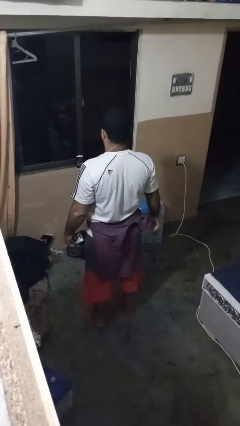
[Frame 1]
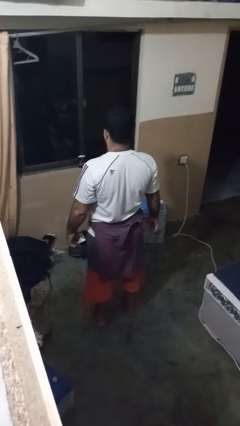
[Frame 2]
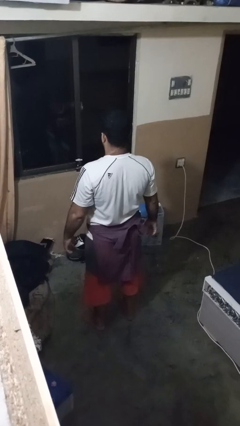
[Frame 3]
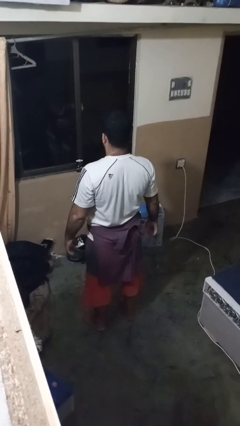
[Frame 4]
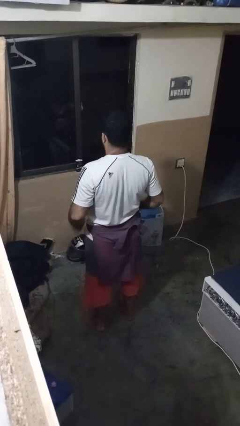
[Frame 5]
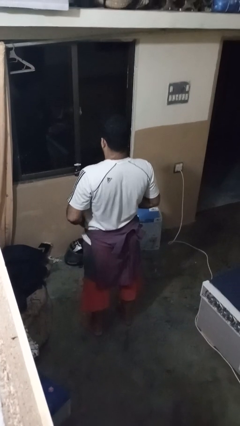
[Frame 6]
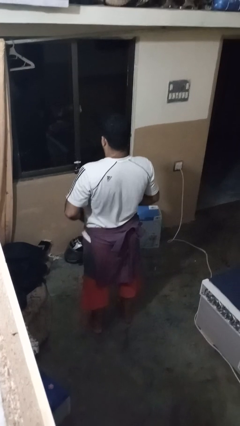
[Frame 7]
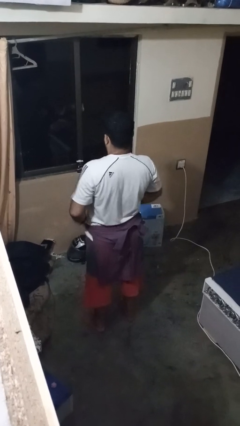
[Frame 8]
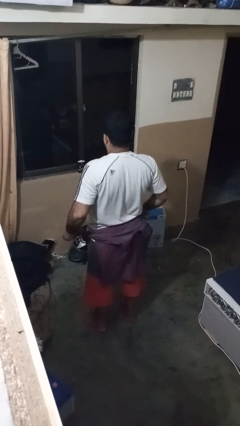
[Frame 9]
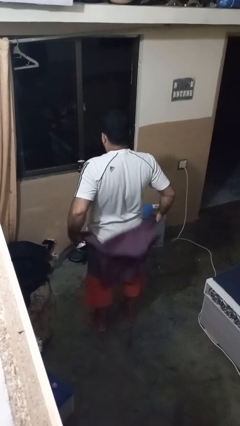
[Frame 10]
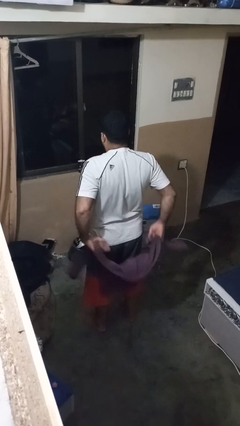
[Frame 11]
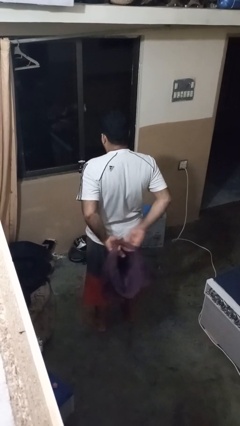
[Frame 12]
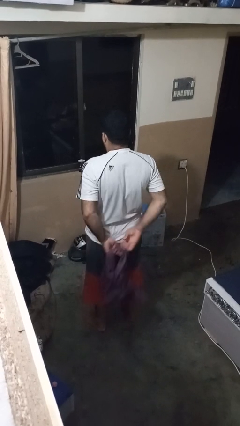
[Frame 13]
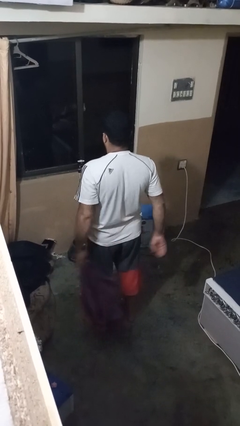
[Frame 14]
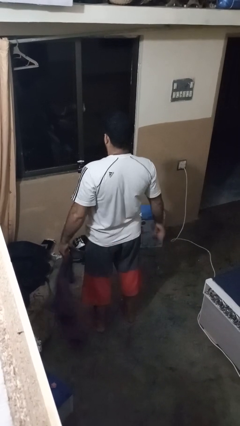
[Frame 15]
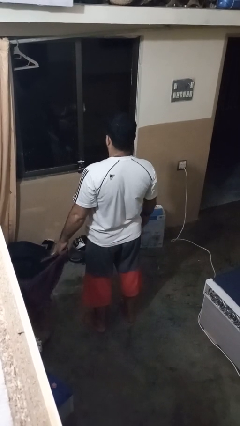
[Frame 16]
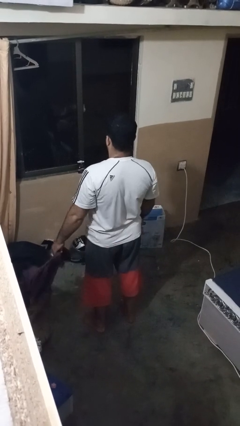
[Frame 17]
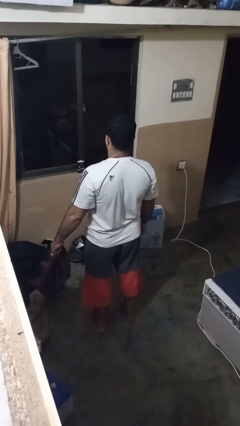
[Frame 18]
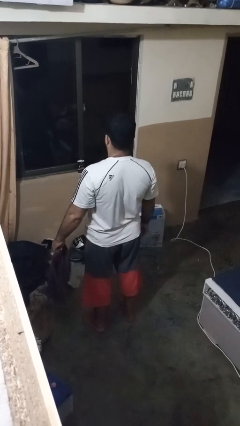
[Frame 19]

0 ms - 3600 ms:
person unties jacket around waist

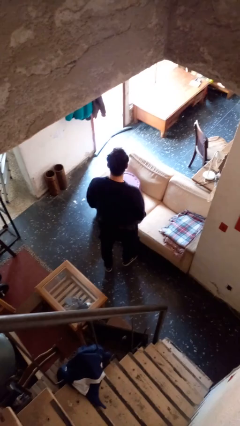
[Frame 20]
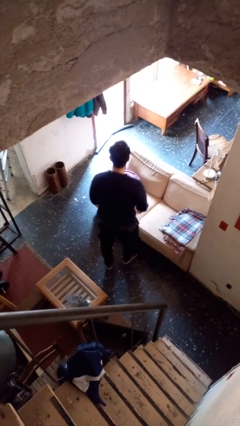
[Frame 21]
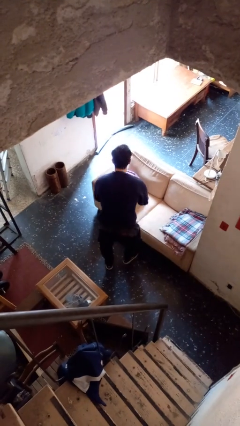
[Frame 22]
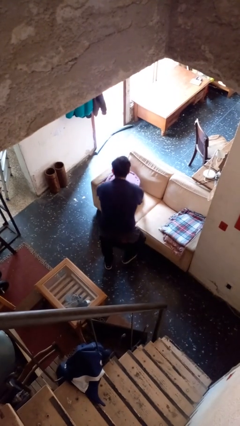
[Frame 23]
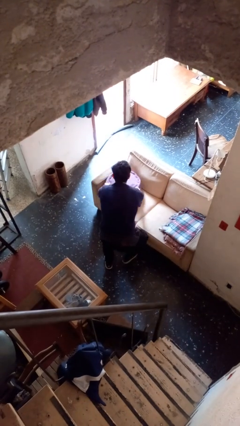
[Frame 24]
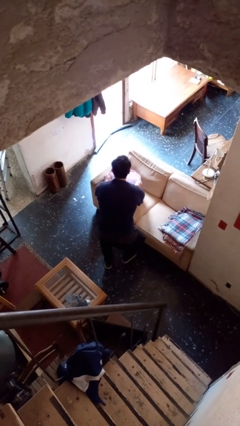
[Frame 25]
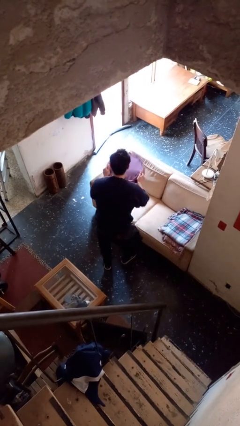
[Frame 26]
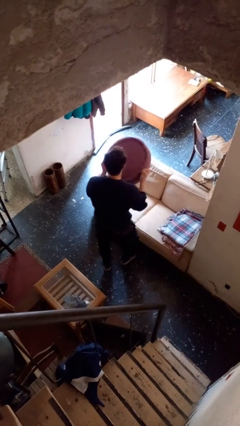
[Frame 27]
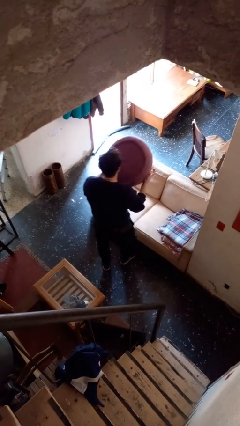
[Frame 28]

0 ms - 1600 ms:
person picks up object from couch

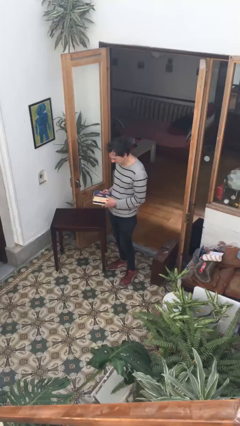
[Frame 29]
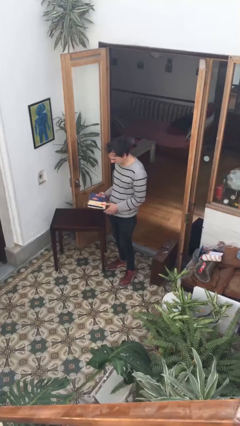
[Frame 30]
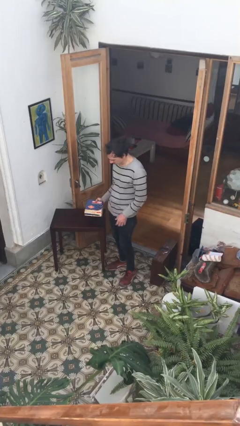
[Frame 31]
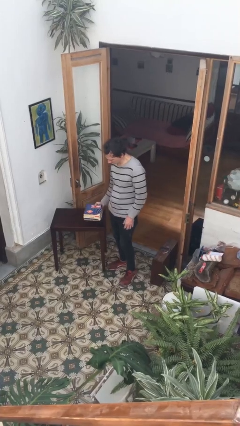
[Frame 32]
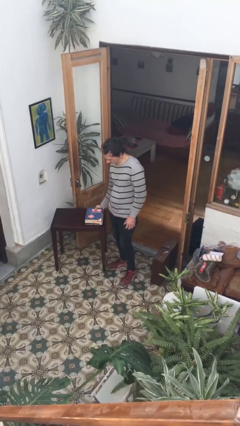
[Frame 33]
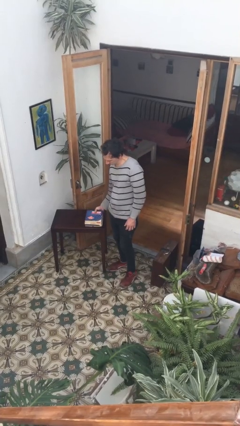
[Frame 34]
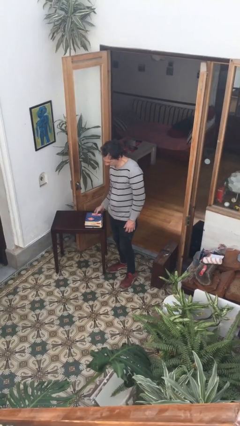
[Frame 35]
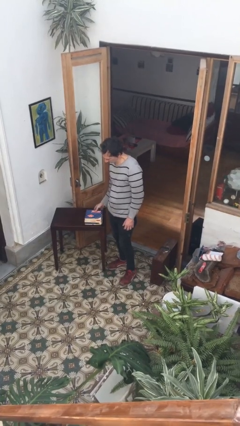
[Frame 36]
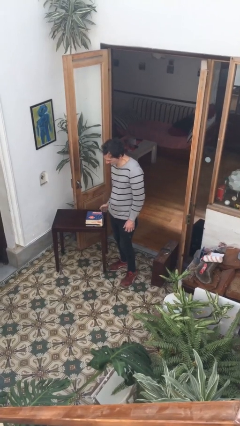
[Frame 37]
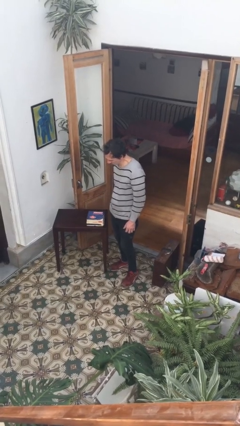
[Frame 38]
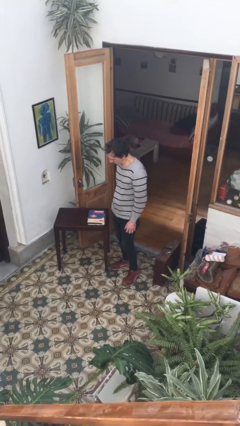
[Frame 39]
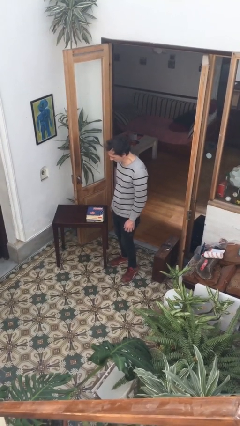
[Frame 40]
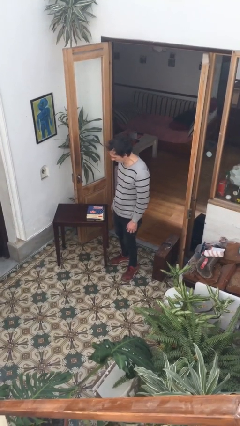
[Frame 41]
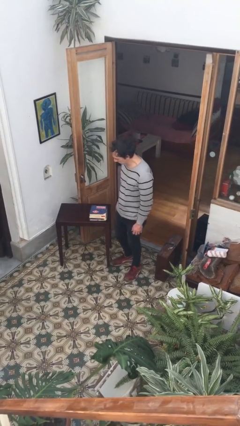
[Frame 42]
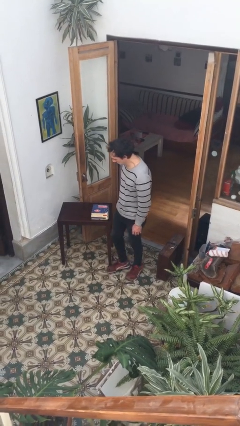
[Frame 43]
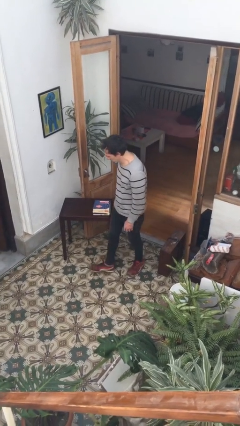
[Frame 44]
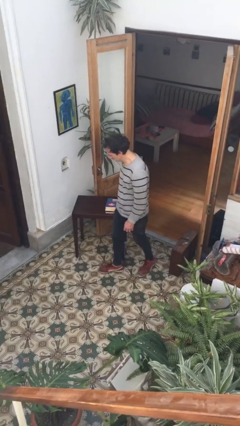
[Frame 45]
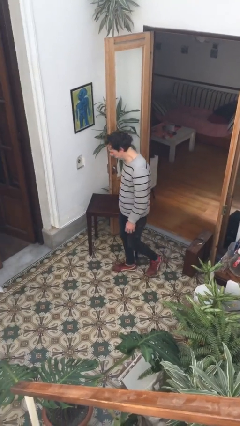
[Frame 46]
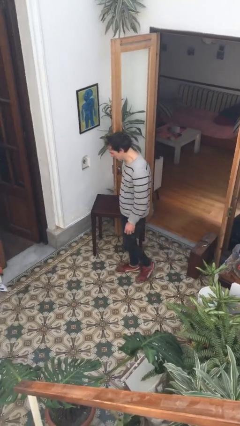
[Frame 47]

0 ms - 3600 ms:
person puts down object on table

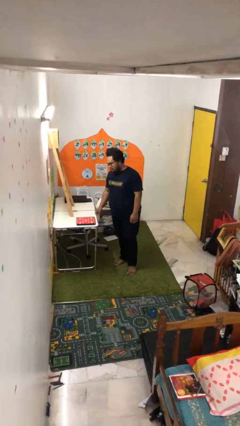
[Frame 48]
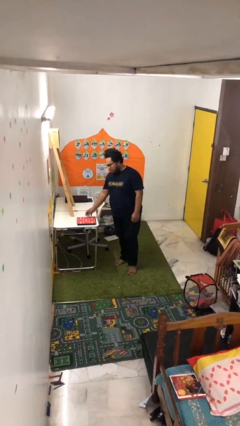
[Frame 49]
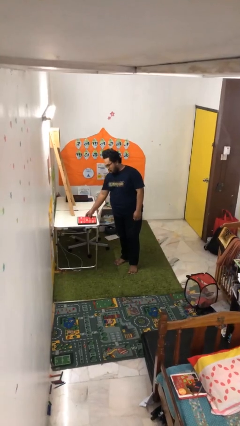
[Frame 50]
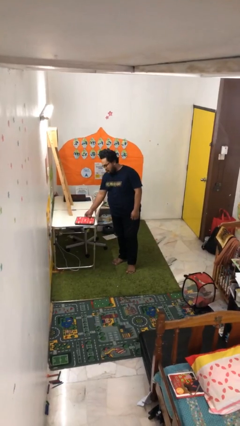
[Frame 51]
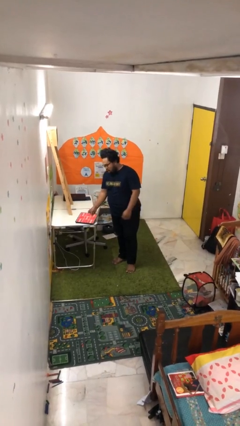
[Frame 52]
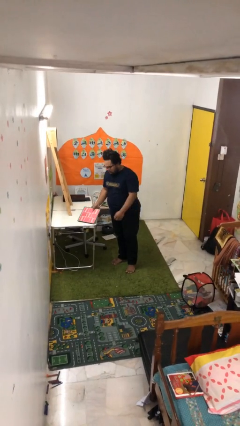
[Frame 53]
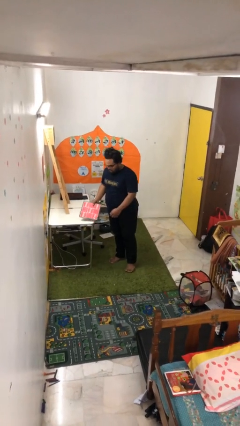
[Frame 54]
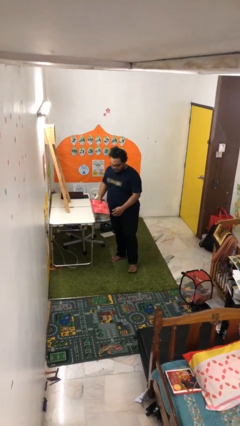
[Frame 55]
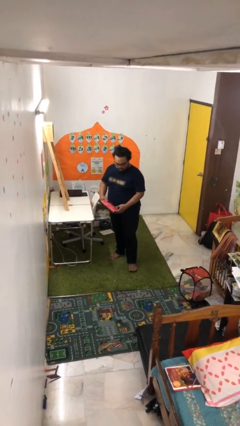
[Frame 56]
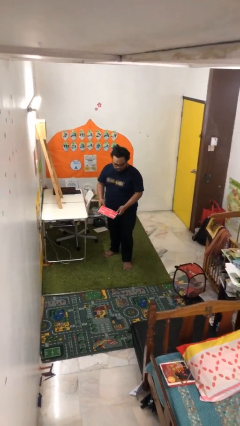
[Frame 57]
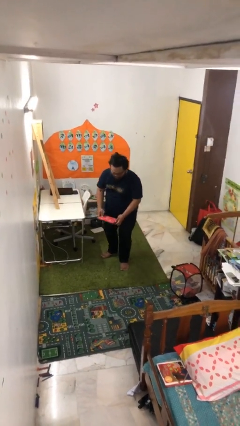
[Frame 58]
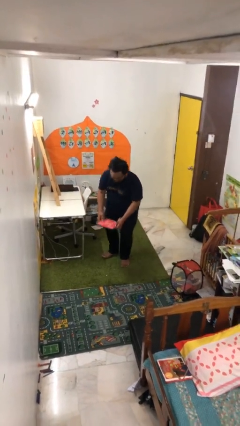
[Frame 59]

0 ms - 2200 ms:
person picks up object from table

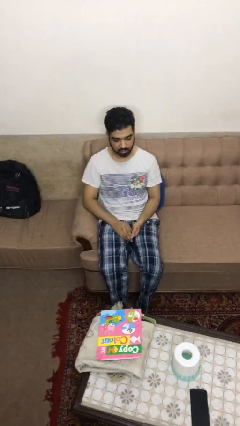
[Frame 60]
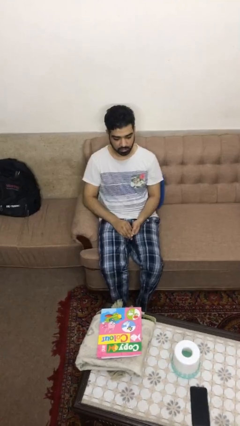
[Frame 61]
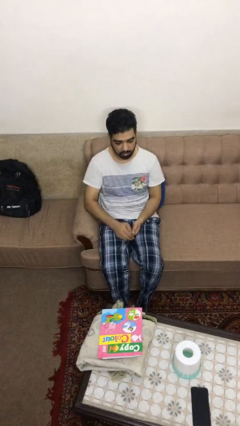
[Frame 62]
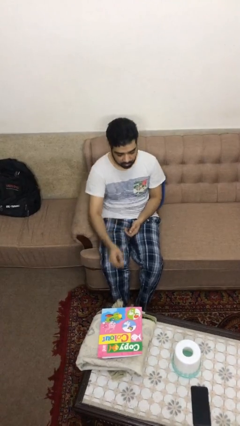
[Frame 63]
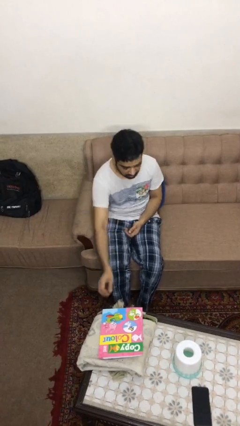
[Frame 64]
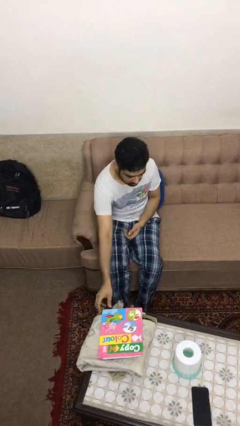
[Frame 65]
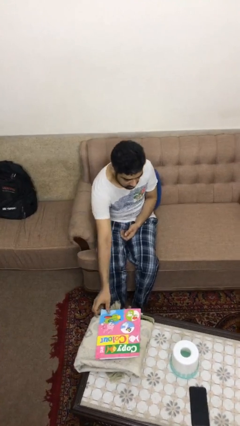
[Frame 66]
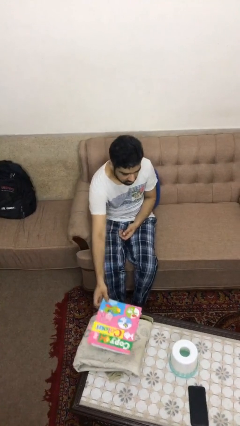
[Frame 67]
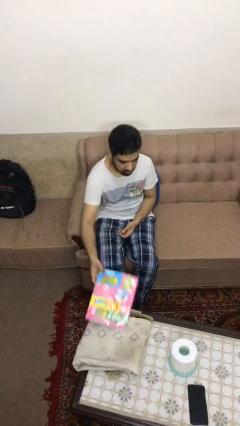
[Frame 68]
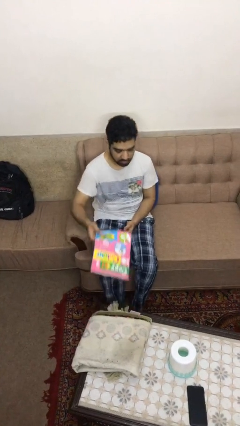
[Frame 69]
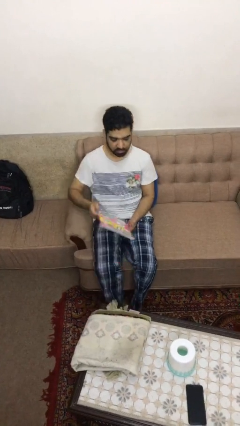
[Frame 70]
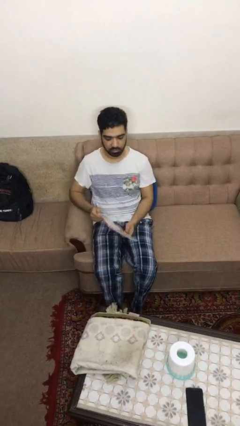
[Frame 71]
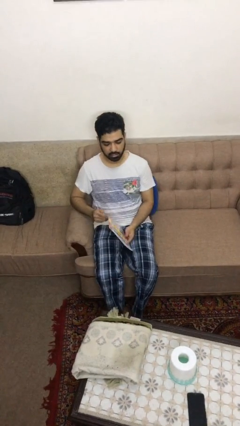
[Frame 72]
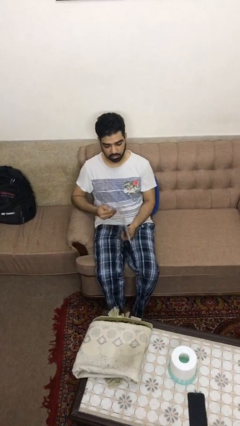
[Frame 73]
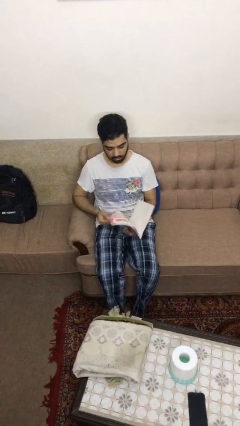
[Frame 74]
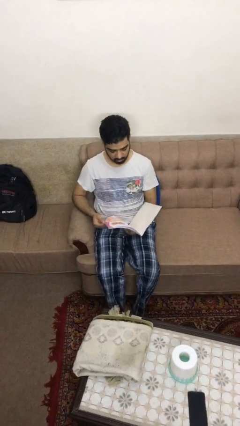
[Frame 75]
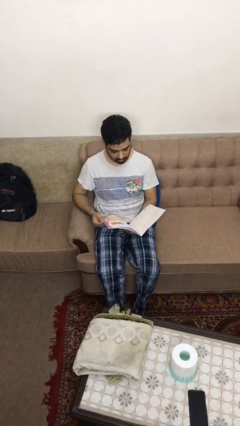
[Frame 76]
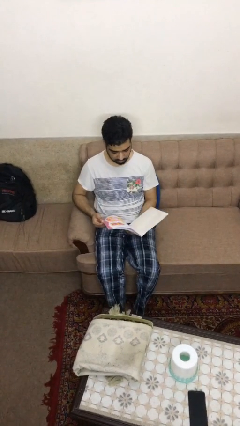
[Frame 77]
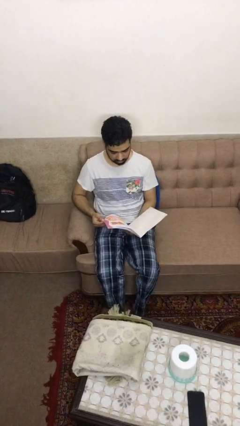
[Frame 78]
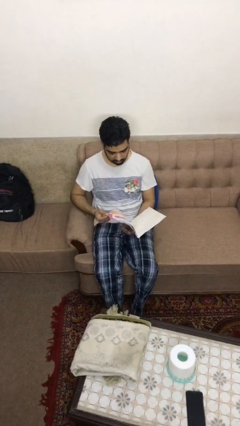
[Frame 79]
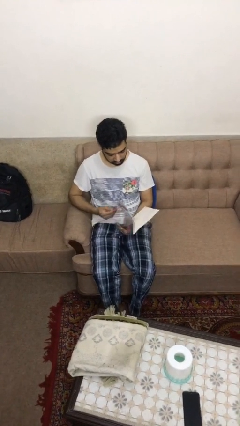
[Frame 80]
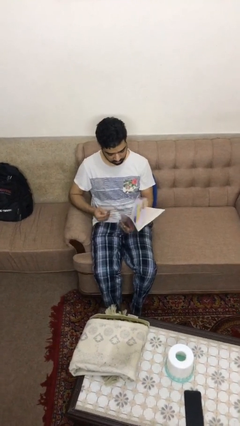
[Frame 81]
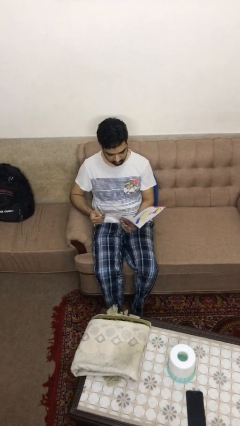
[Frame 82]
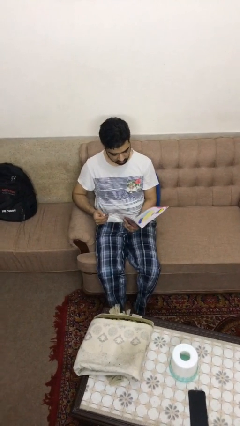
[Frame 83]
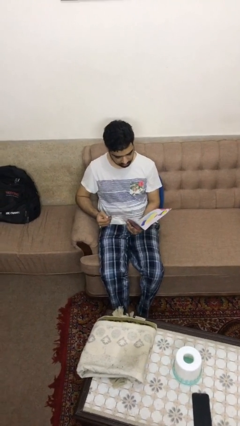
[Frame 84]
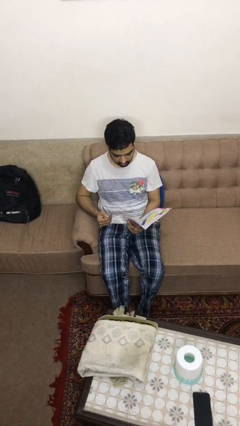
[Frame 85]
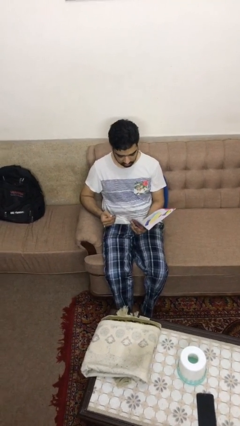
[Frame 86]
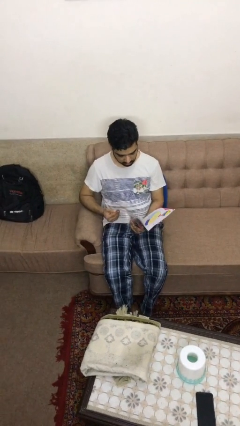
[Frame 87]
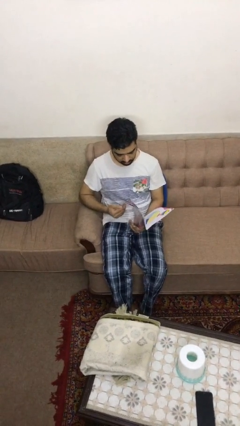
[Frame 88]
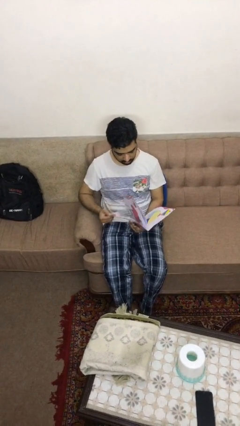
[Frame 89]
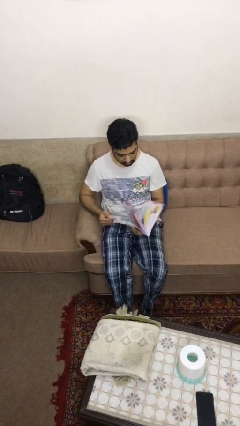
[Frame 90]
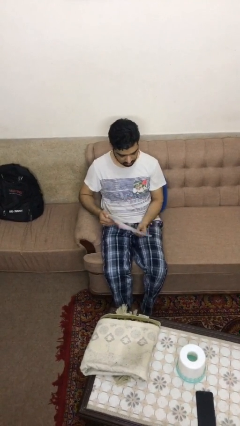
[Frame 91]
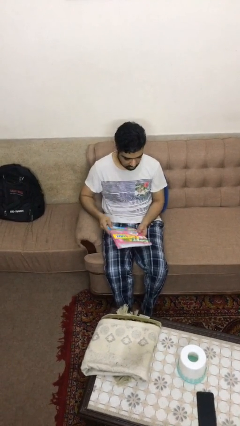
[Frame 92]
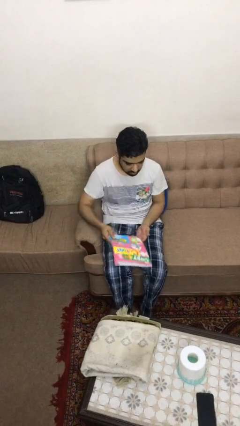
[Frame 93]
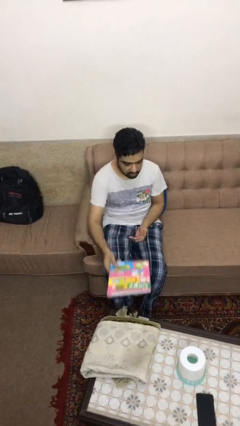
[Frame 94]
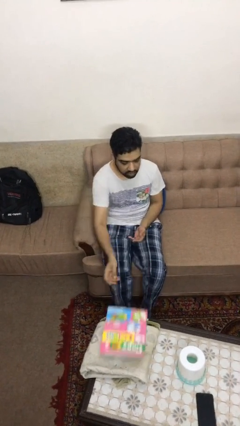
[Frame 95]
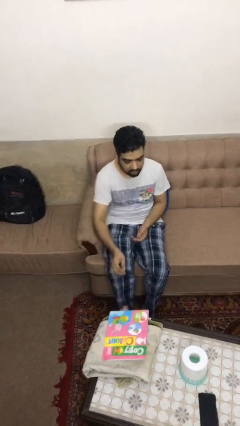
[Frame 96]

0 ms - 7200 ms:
person reads magazine
